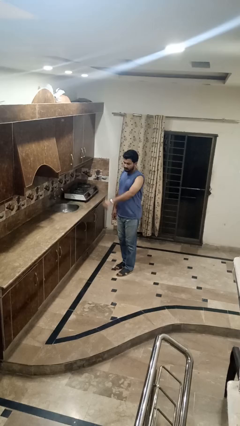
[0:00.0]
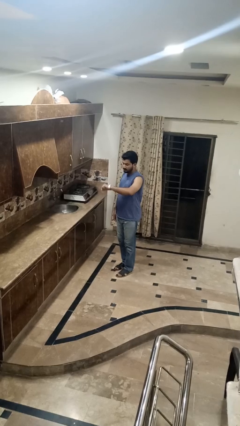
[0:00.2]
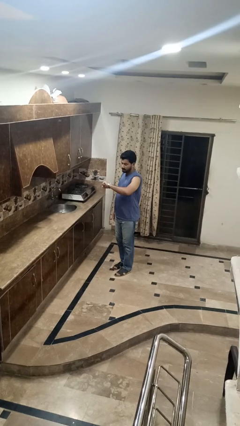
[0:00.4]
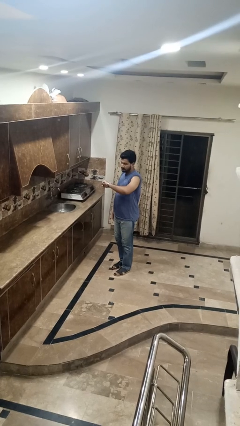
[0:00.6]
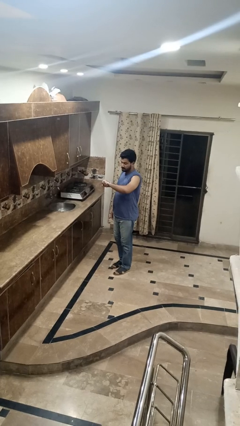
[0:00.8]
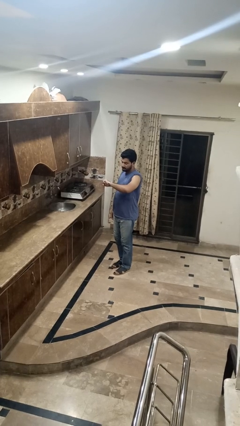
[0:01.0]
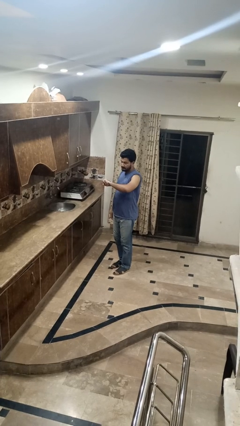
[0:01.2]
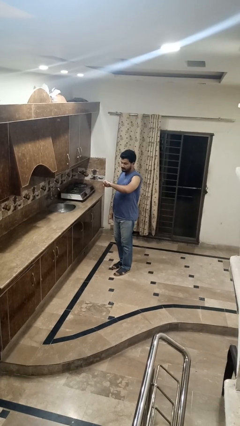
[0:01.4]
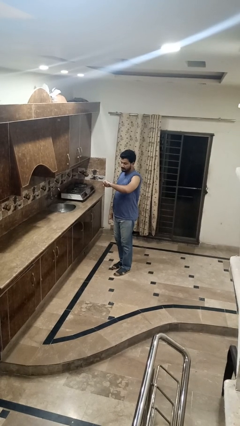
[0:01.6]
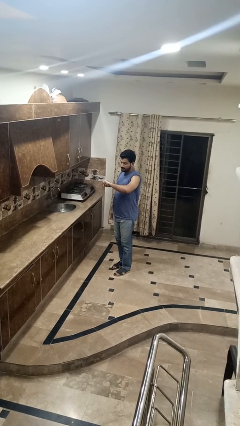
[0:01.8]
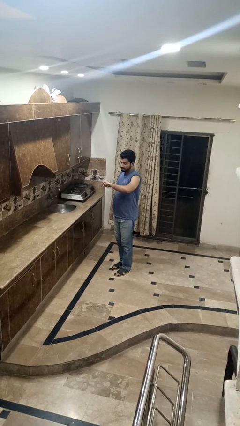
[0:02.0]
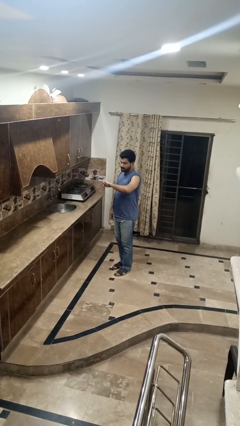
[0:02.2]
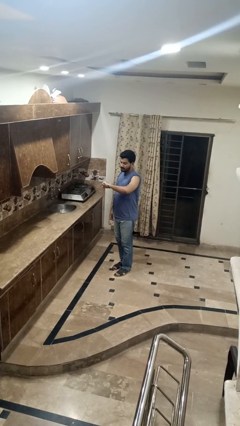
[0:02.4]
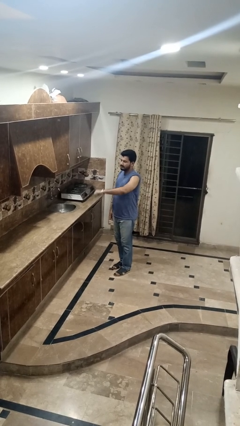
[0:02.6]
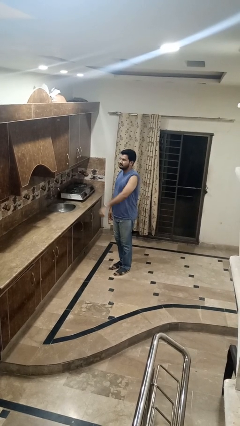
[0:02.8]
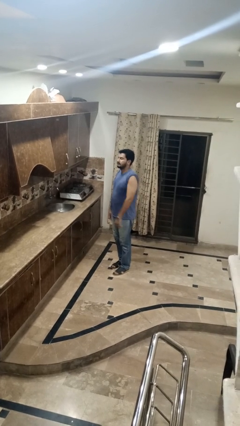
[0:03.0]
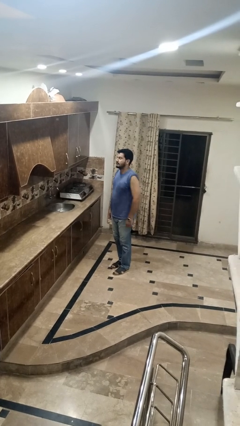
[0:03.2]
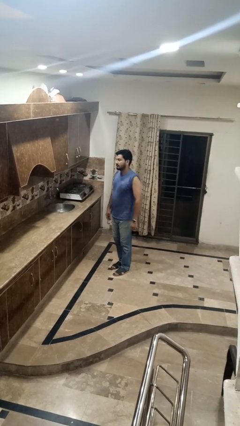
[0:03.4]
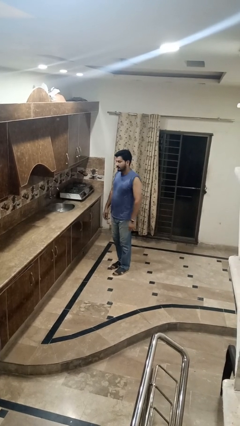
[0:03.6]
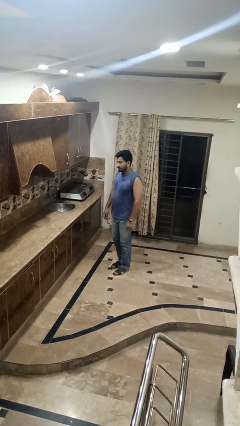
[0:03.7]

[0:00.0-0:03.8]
person looks at wristwatch

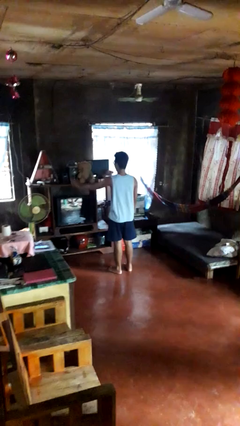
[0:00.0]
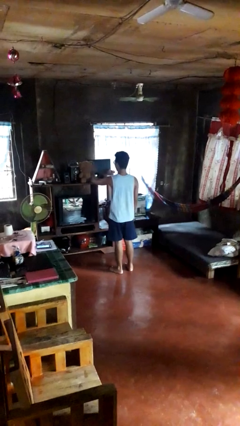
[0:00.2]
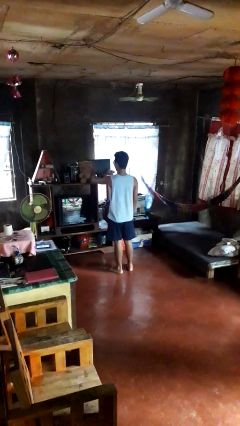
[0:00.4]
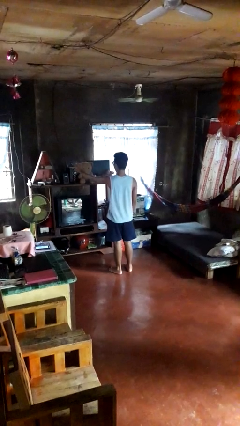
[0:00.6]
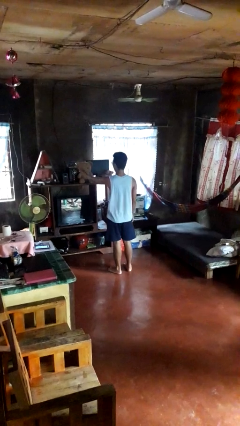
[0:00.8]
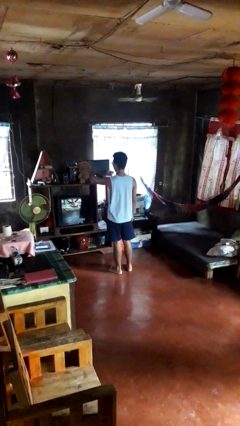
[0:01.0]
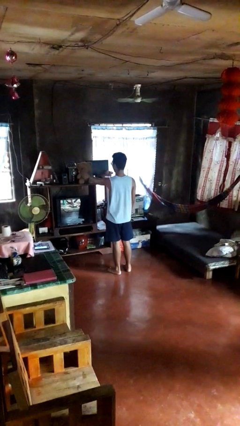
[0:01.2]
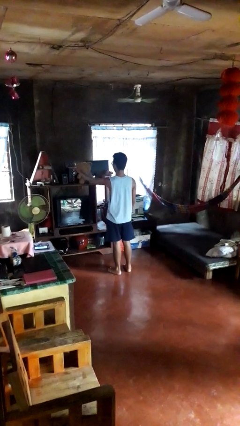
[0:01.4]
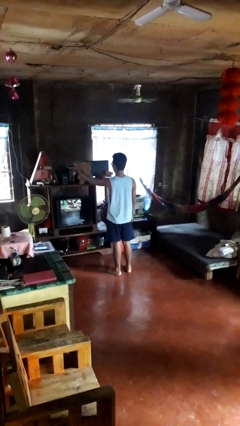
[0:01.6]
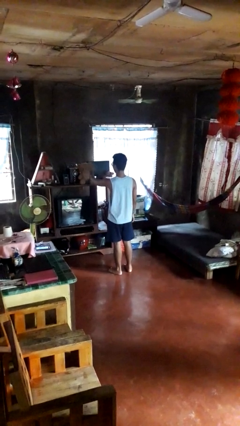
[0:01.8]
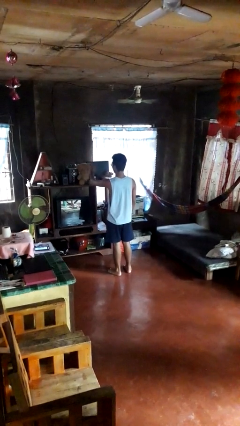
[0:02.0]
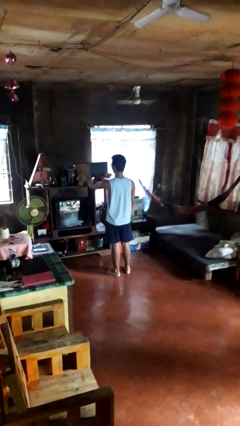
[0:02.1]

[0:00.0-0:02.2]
person waves hand over object

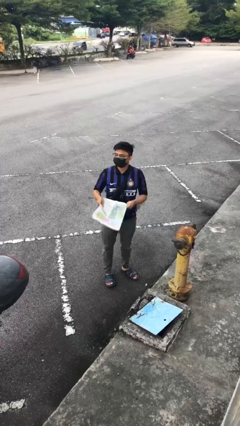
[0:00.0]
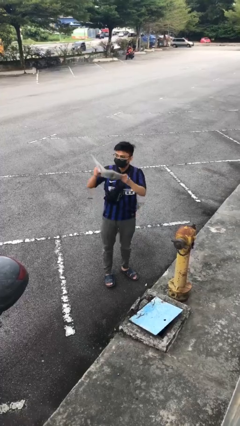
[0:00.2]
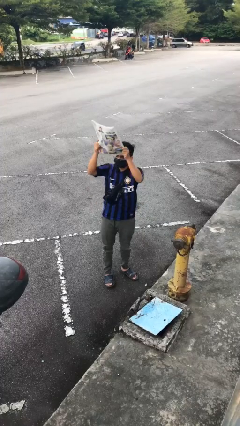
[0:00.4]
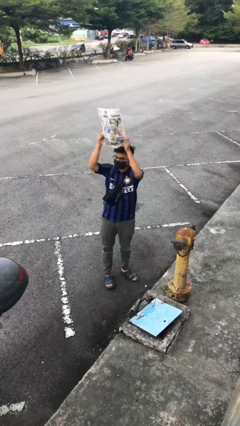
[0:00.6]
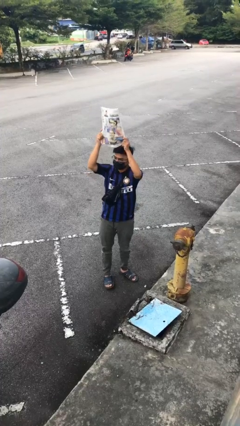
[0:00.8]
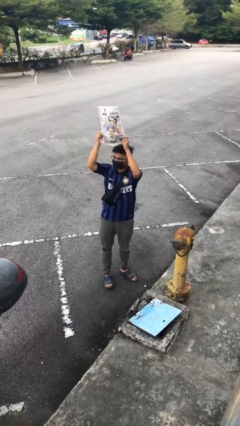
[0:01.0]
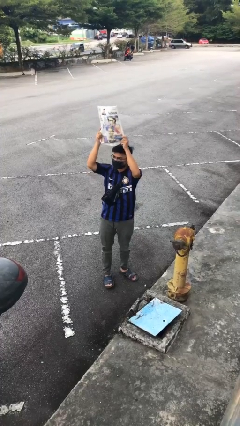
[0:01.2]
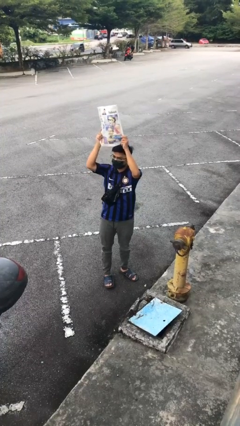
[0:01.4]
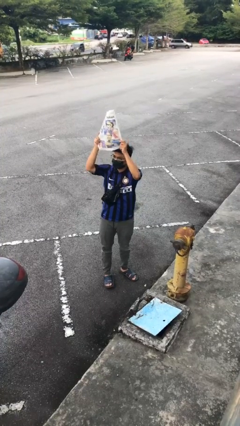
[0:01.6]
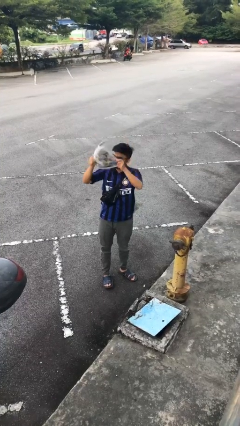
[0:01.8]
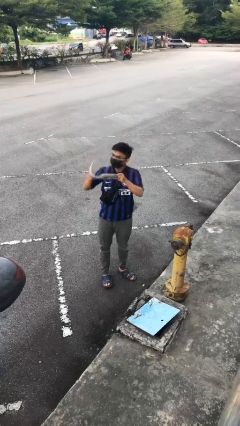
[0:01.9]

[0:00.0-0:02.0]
person holds object above head

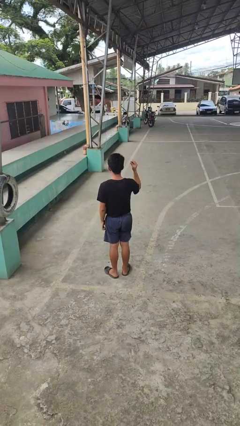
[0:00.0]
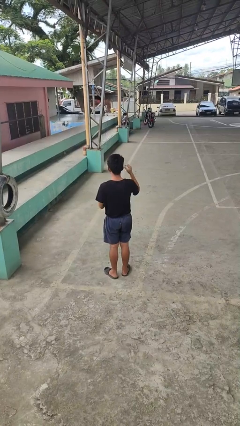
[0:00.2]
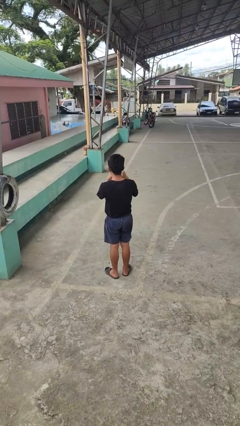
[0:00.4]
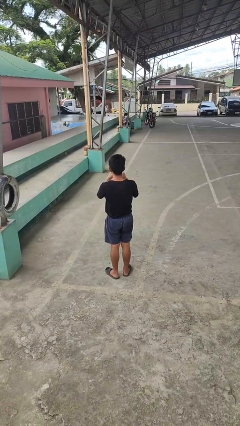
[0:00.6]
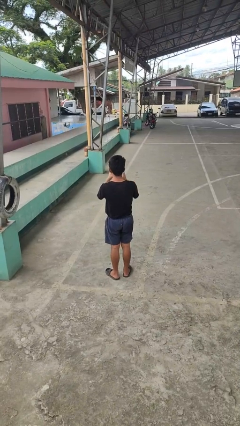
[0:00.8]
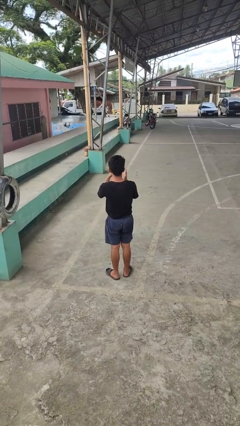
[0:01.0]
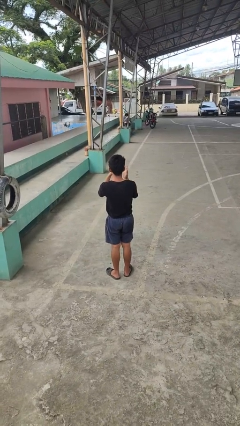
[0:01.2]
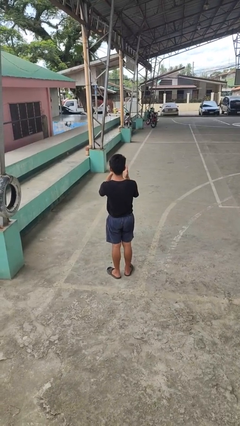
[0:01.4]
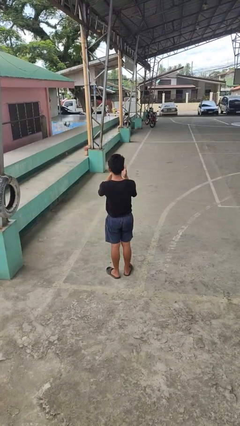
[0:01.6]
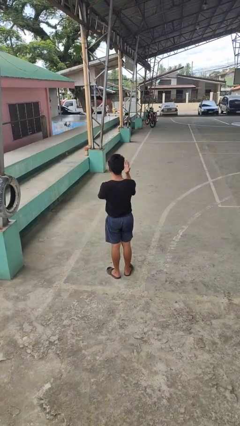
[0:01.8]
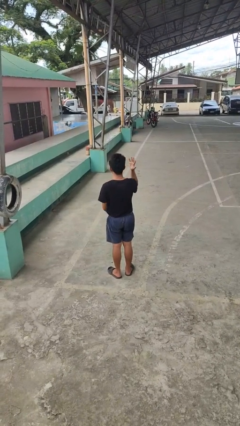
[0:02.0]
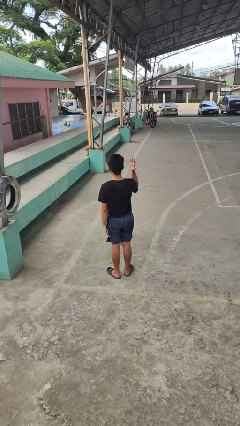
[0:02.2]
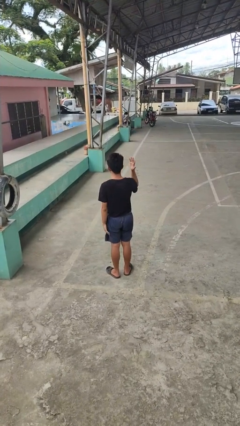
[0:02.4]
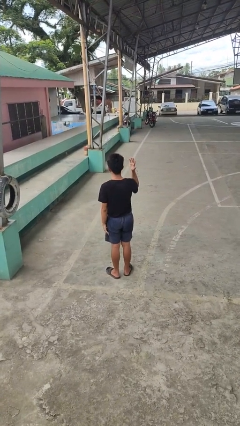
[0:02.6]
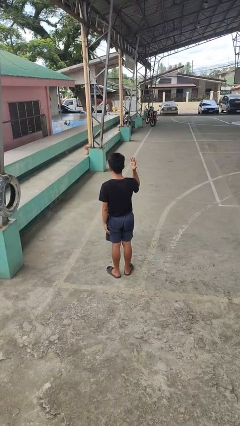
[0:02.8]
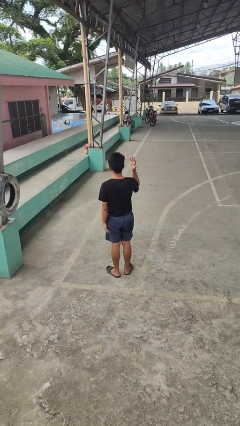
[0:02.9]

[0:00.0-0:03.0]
person puts on ring

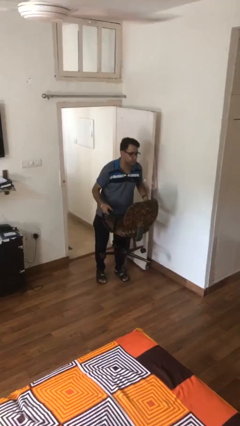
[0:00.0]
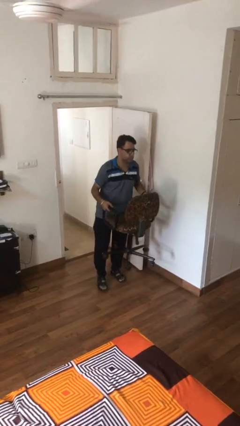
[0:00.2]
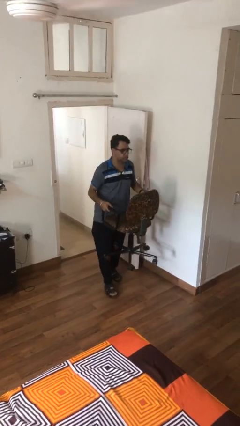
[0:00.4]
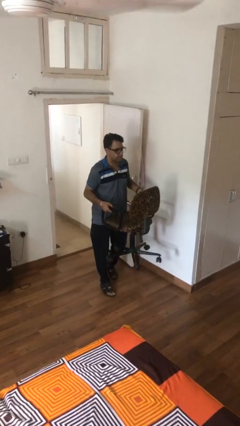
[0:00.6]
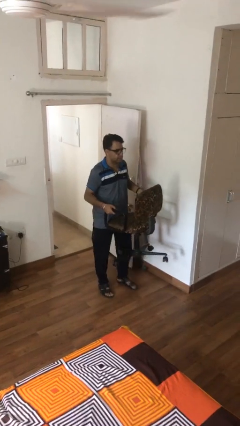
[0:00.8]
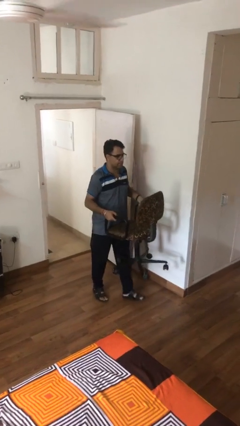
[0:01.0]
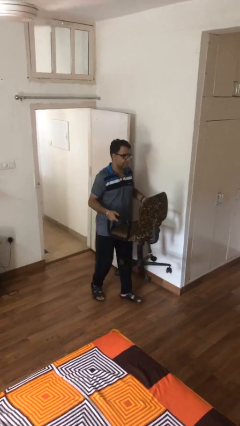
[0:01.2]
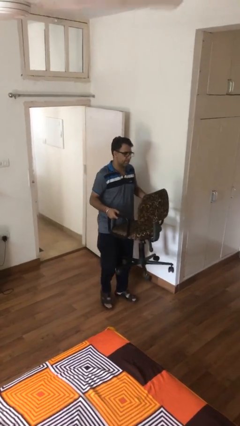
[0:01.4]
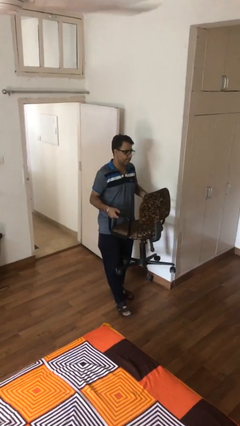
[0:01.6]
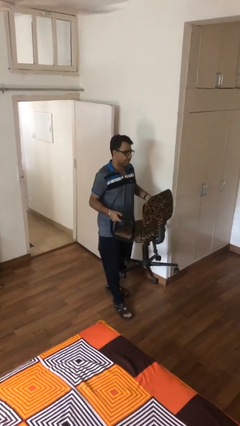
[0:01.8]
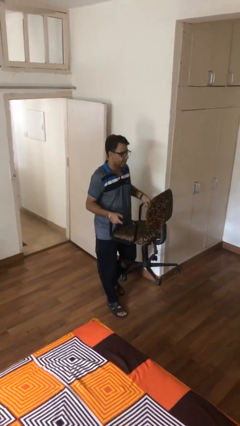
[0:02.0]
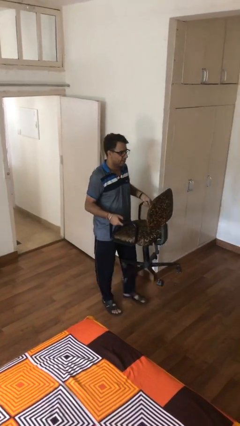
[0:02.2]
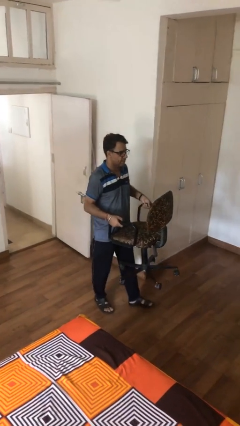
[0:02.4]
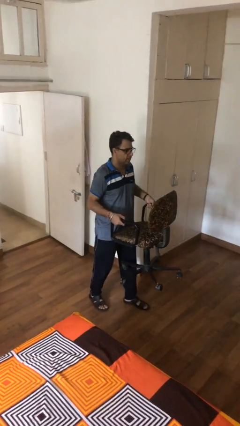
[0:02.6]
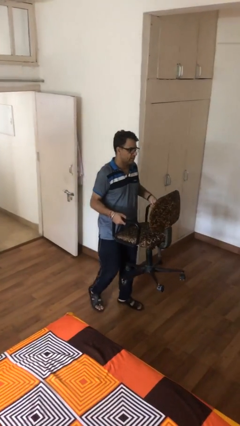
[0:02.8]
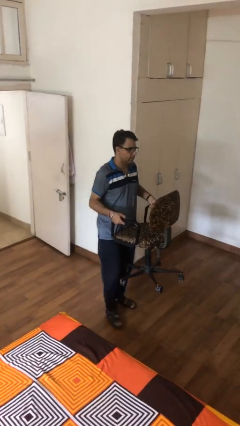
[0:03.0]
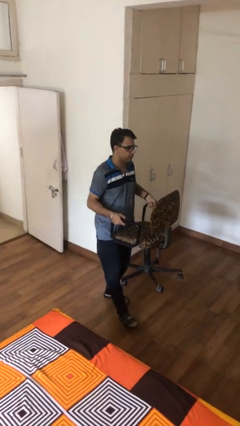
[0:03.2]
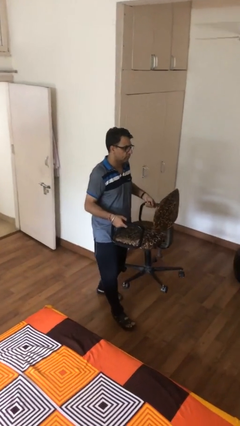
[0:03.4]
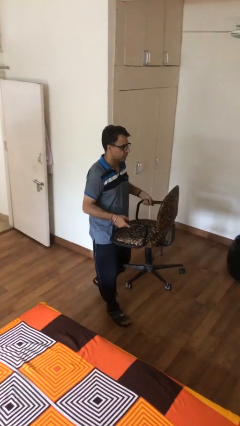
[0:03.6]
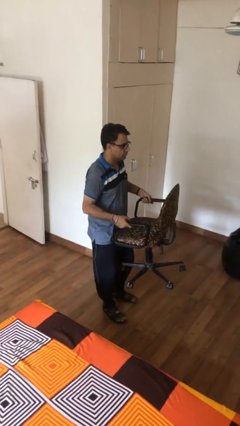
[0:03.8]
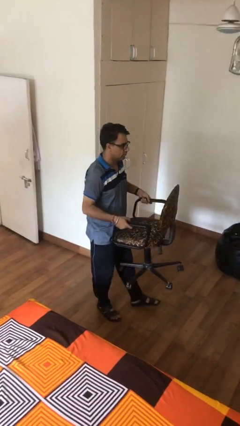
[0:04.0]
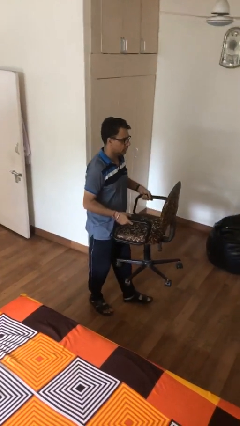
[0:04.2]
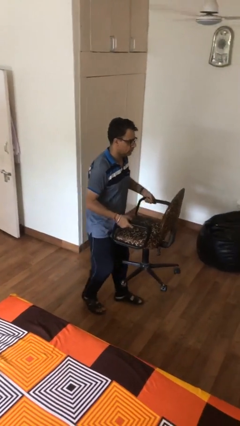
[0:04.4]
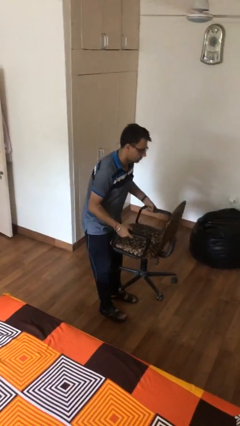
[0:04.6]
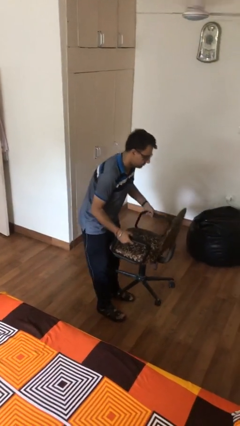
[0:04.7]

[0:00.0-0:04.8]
person carries heavy object

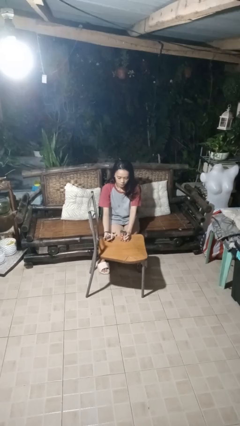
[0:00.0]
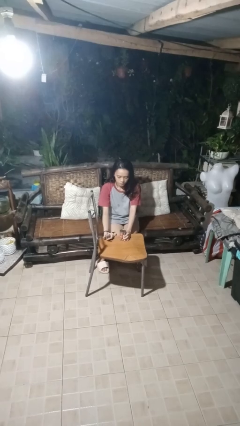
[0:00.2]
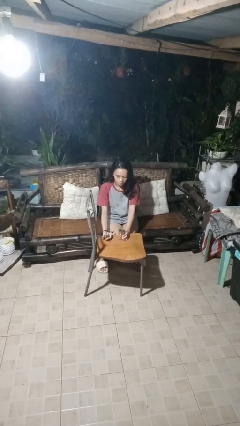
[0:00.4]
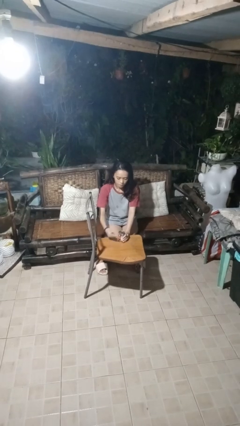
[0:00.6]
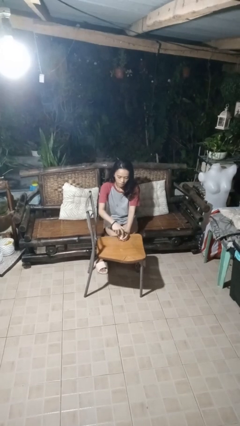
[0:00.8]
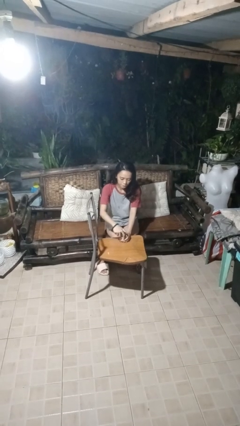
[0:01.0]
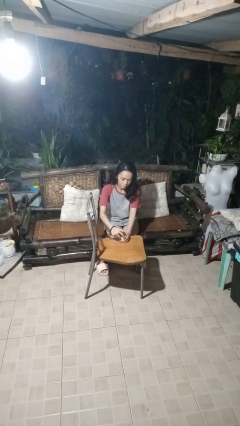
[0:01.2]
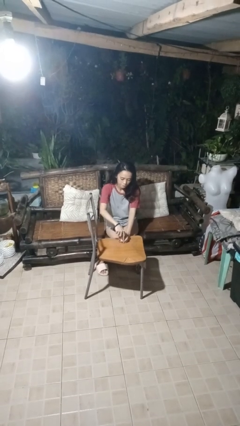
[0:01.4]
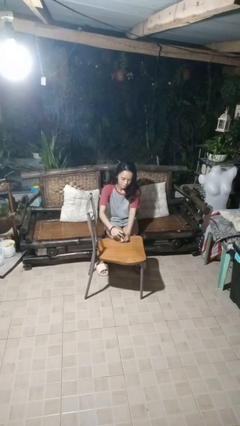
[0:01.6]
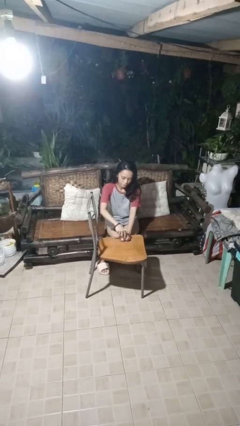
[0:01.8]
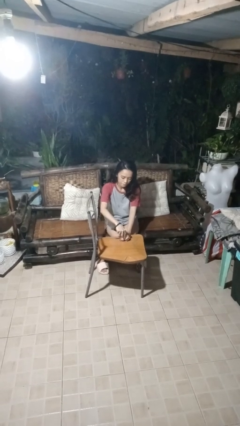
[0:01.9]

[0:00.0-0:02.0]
person opens can with can opener
